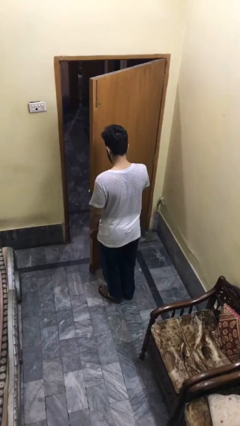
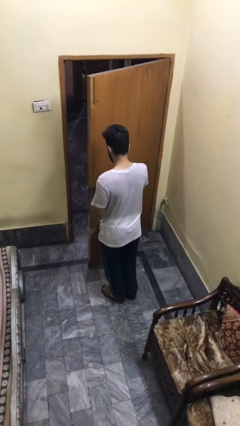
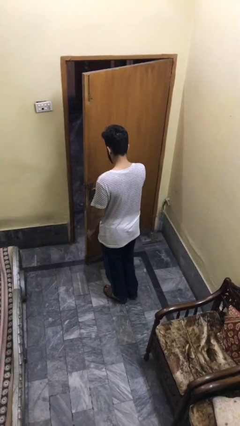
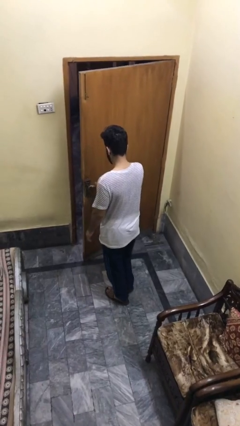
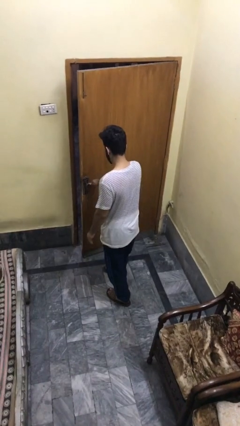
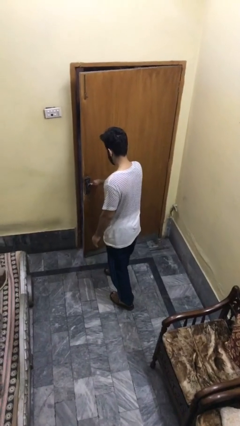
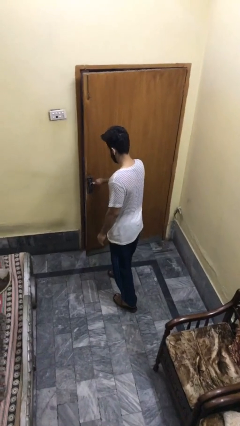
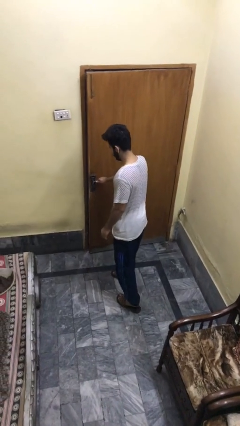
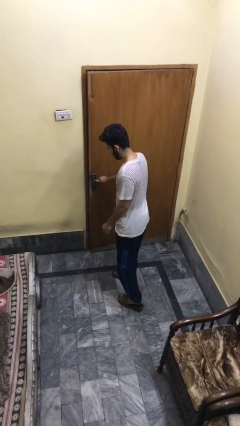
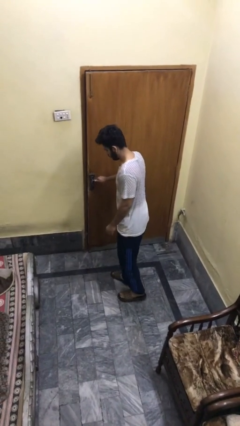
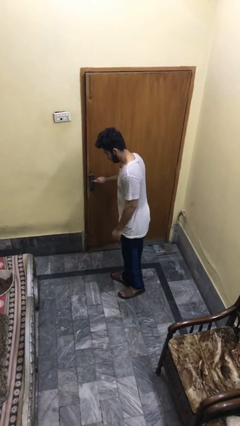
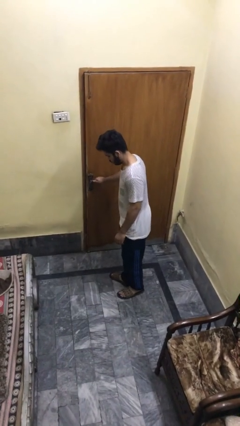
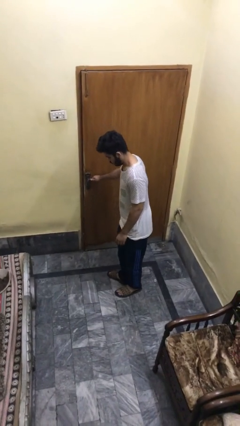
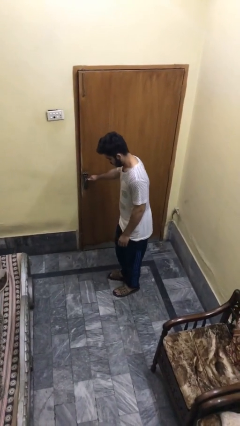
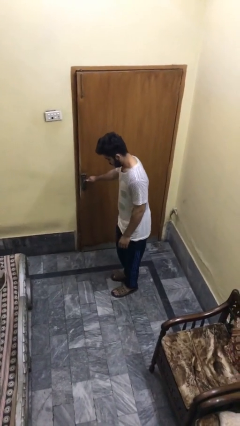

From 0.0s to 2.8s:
person closes facility door

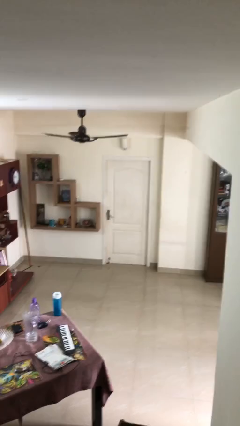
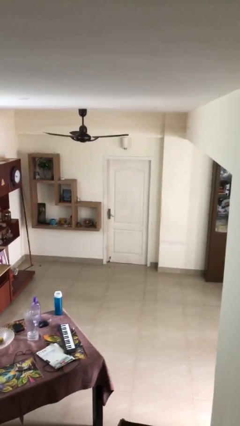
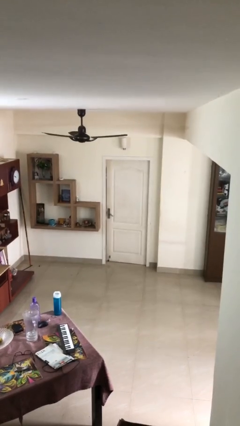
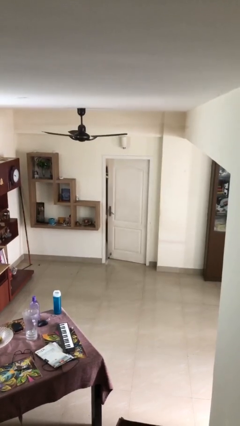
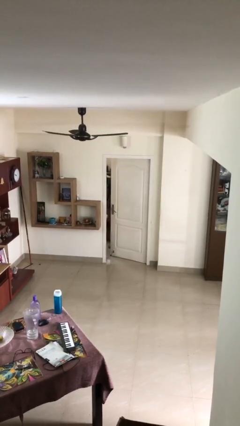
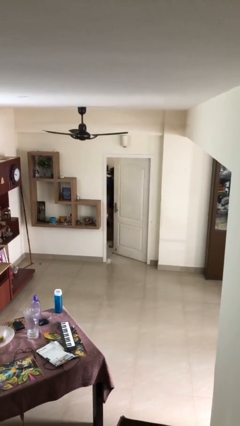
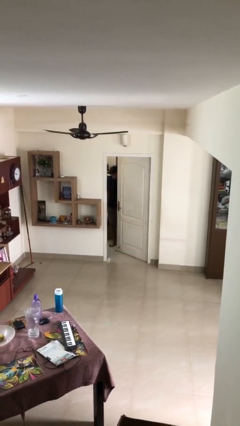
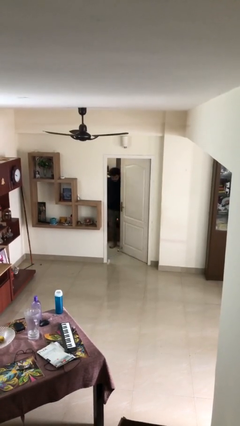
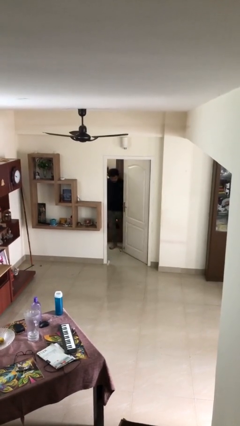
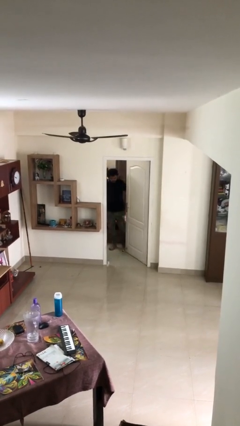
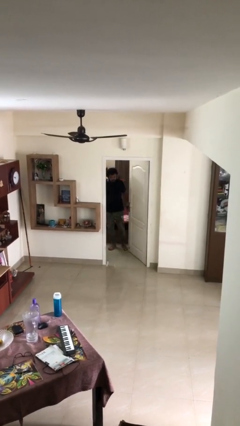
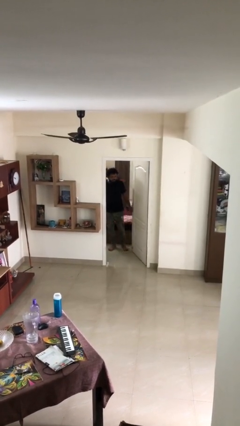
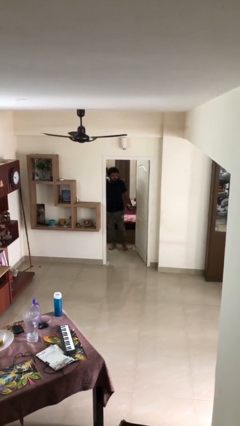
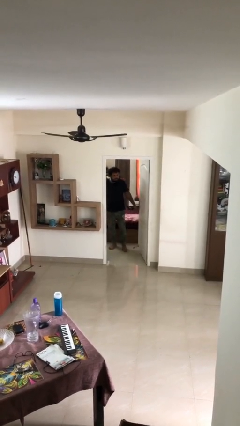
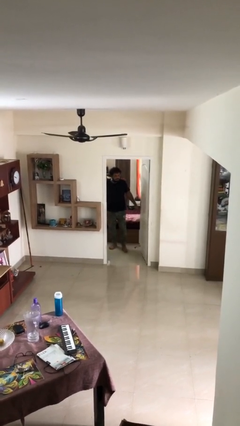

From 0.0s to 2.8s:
person opens facility door

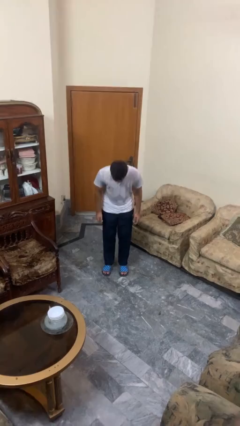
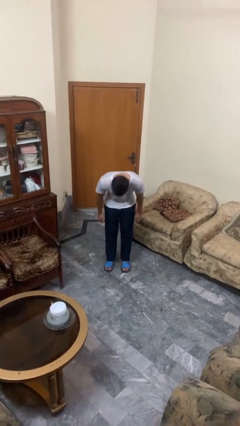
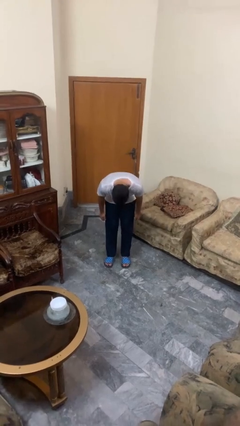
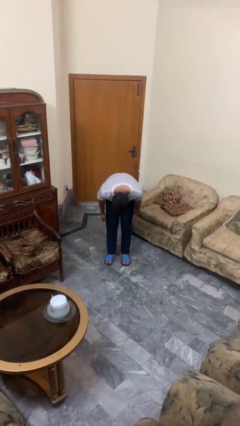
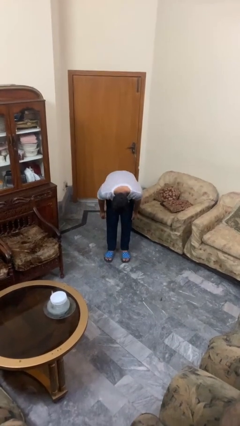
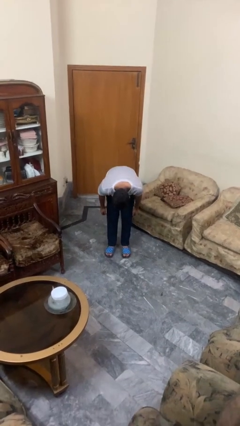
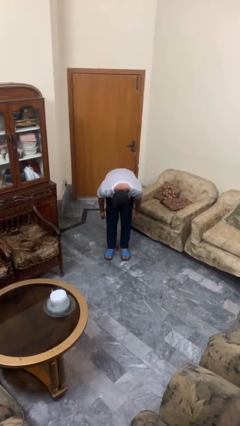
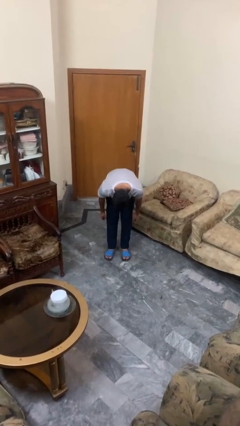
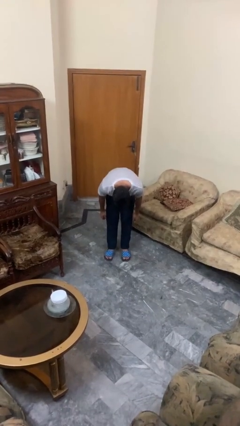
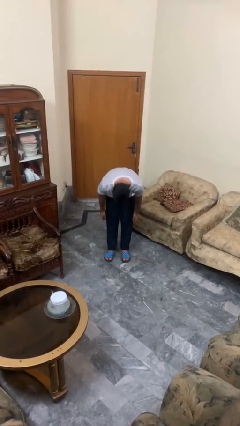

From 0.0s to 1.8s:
person bows

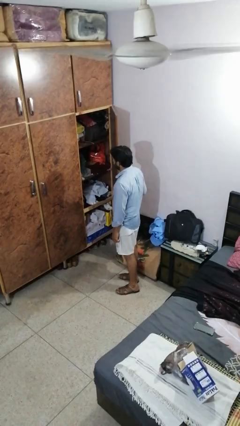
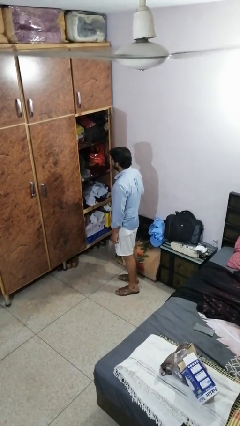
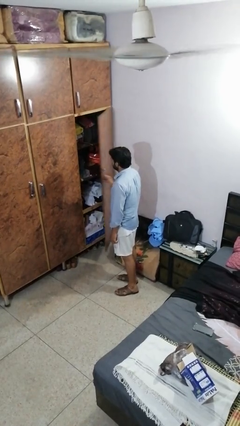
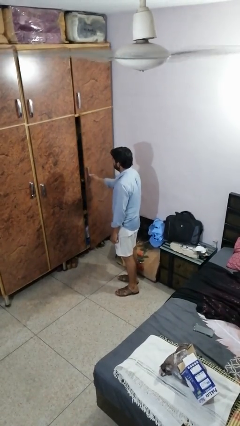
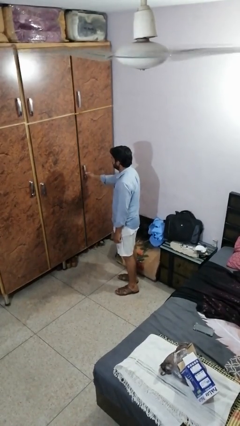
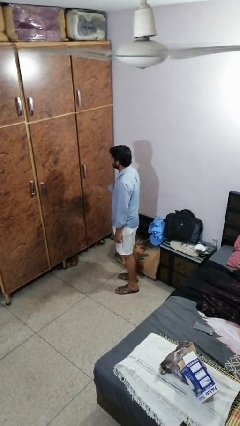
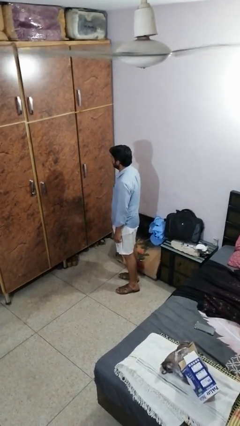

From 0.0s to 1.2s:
person closes closet door

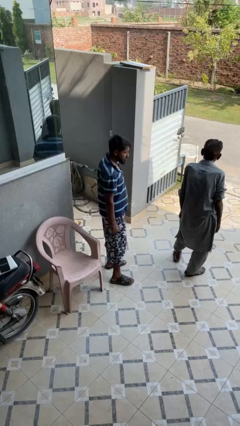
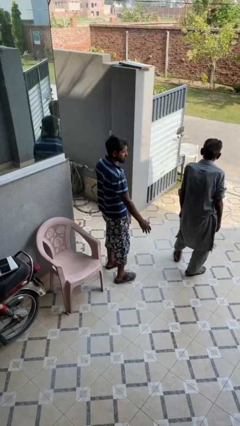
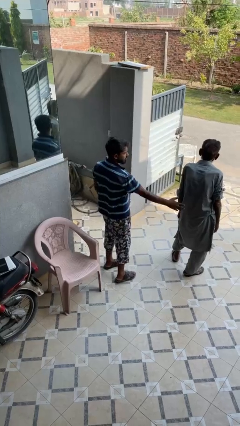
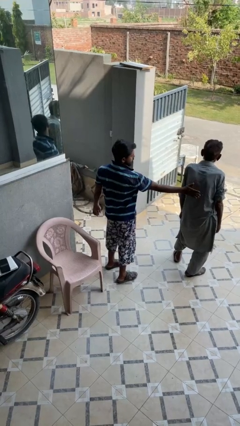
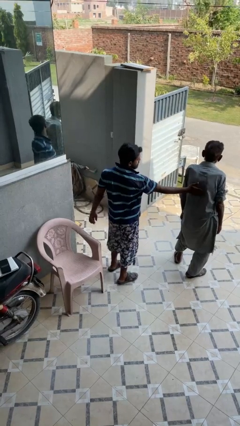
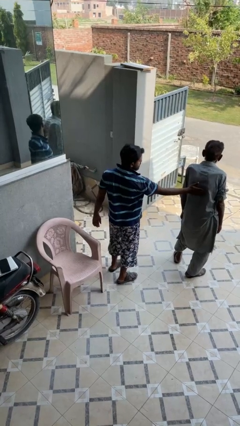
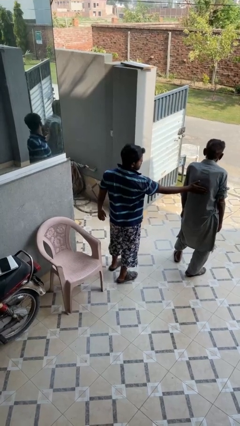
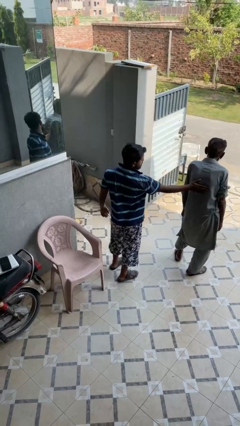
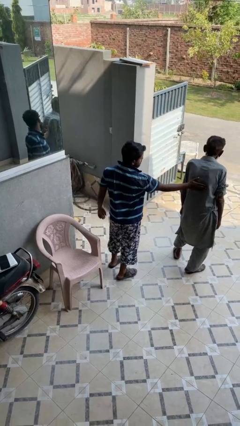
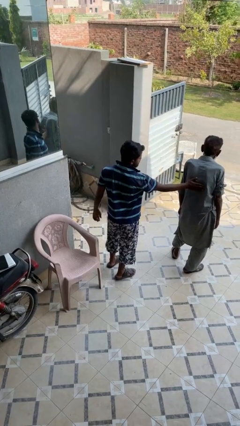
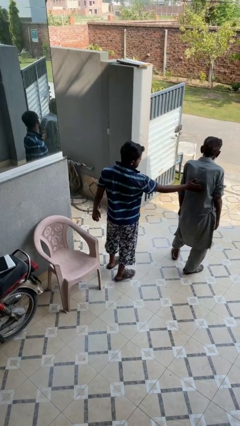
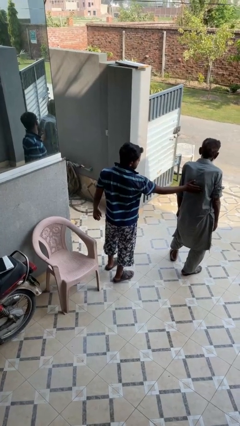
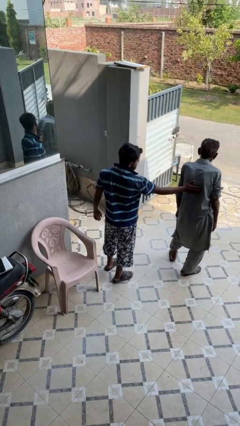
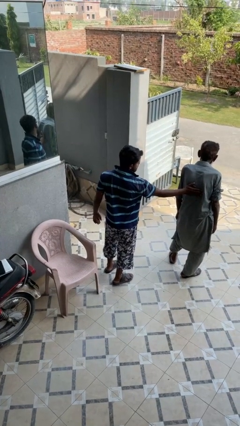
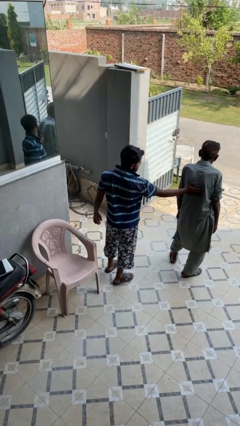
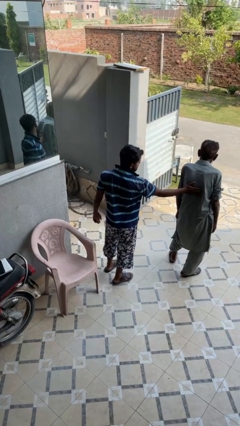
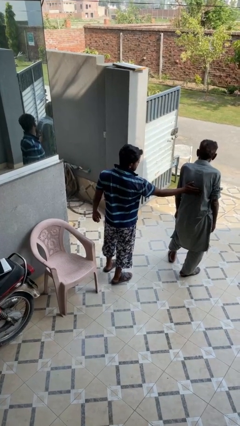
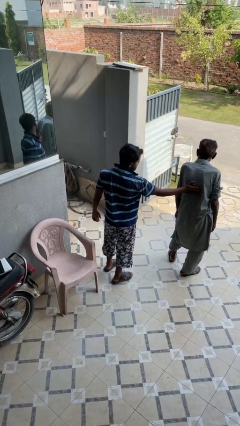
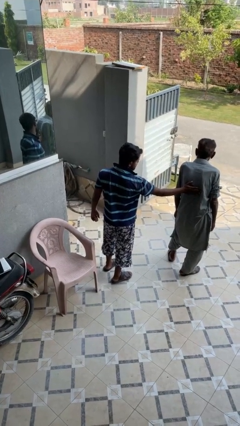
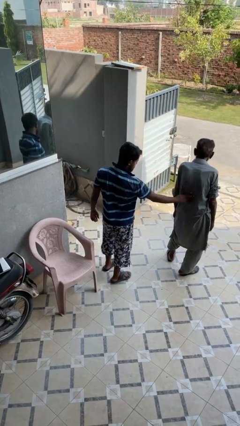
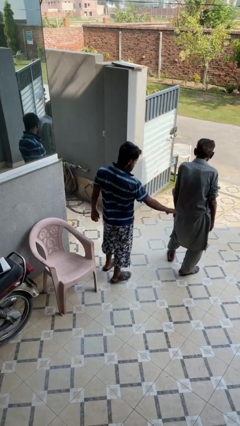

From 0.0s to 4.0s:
person touches back of person

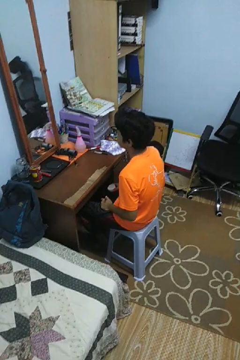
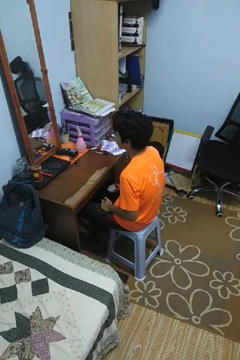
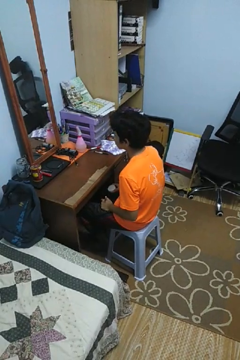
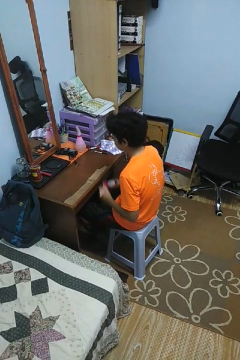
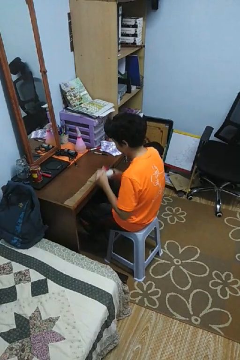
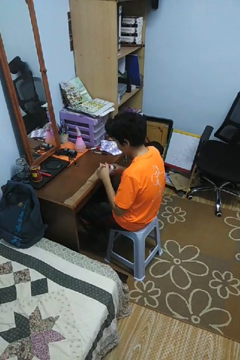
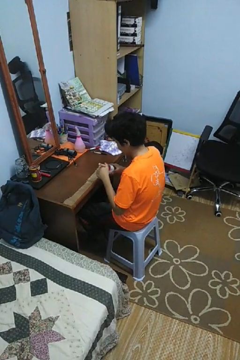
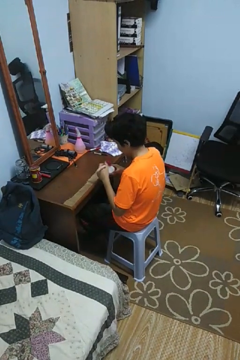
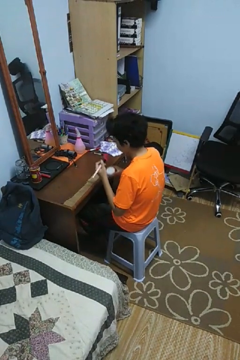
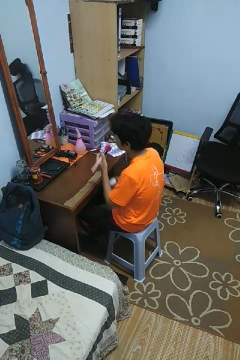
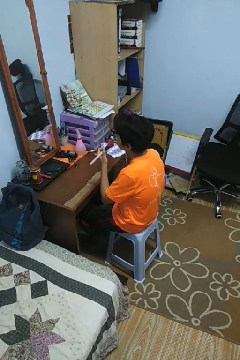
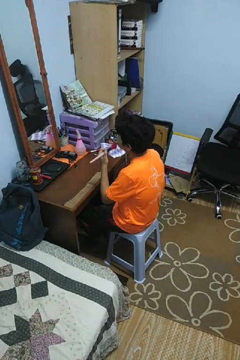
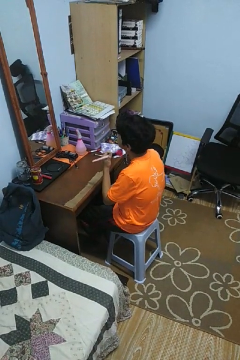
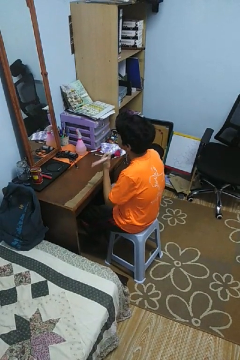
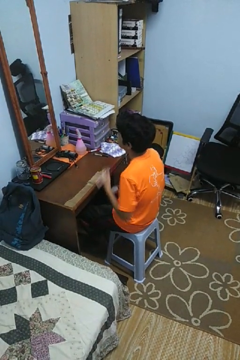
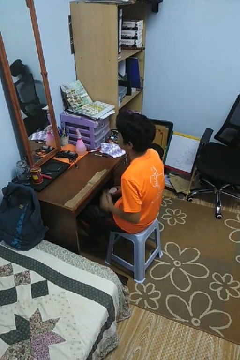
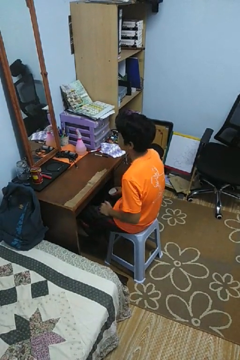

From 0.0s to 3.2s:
person applies foundation makeup

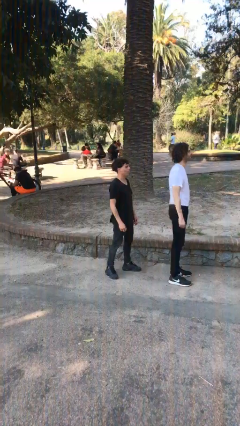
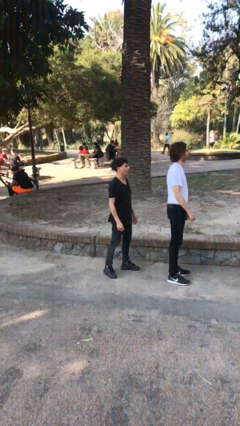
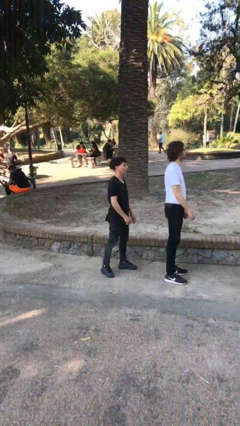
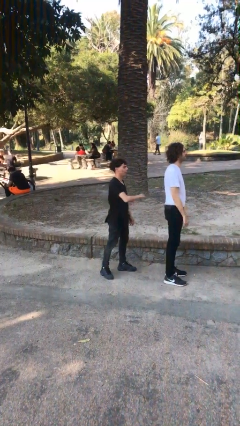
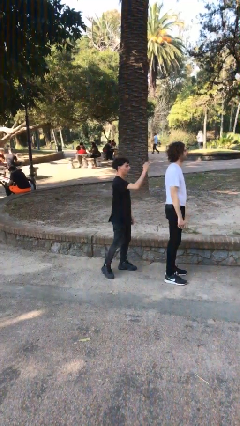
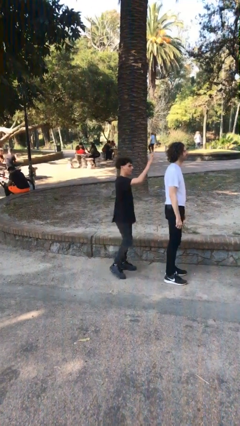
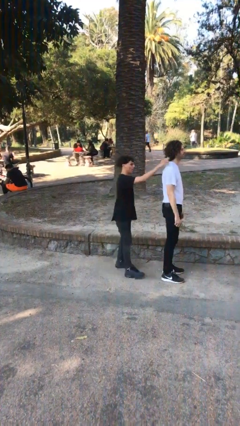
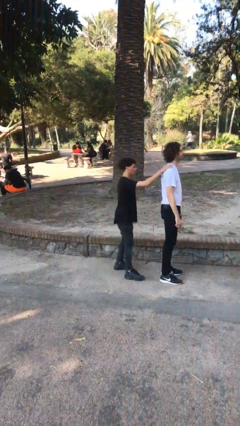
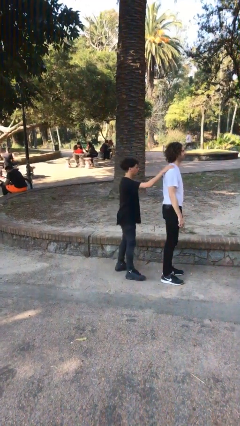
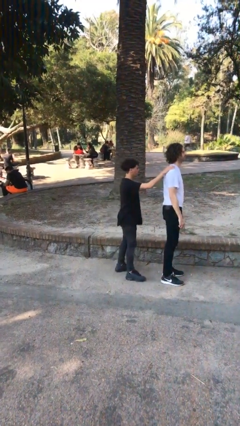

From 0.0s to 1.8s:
person grabs person by shoulder
